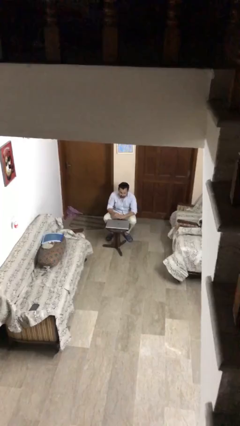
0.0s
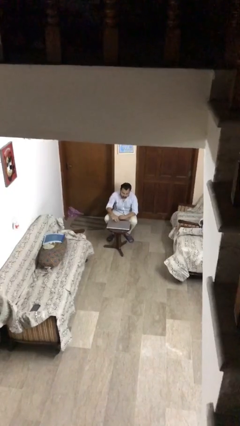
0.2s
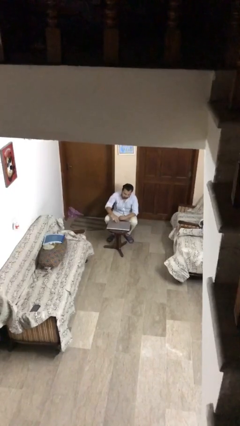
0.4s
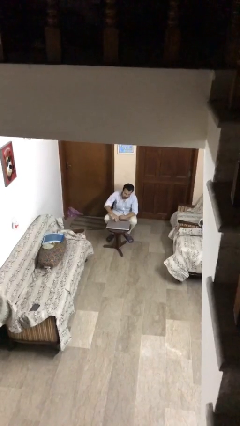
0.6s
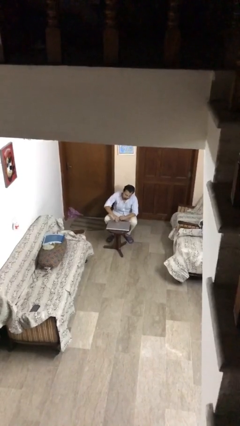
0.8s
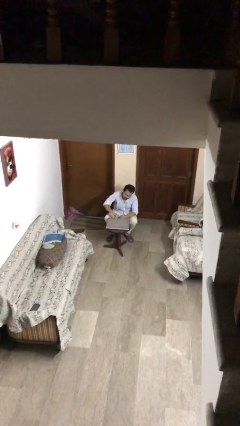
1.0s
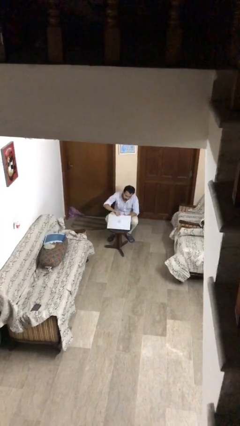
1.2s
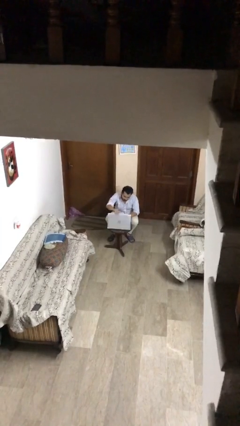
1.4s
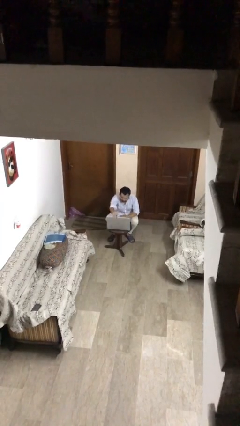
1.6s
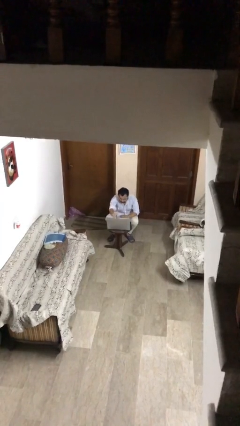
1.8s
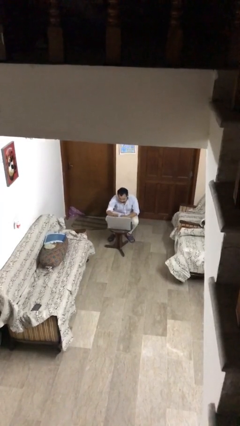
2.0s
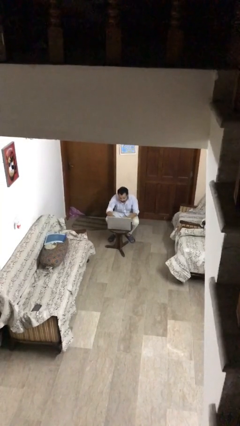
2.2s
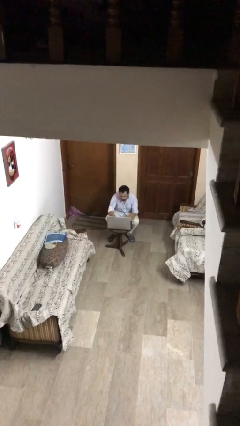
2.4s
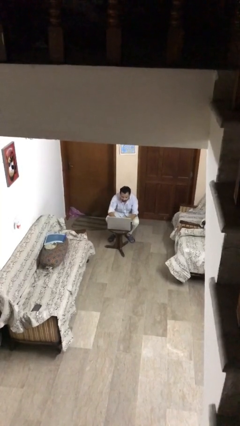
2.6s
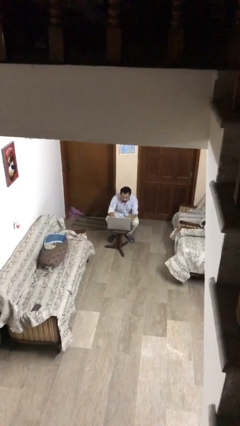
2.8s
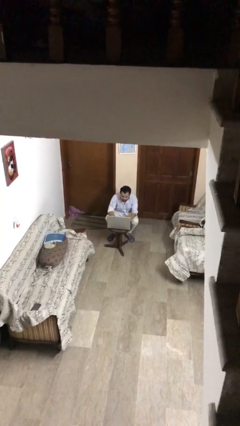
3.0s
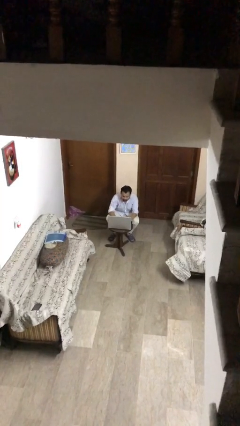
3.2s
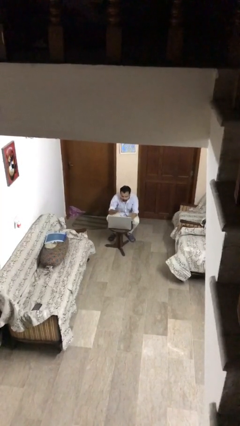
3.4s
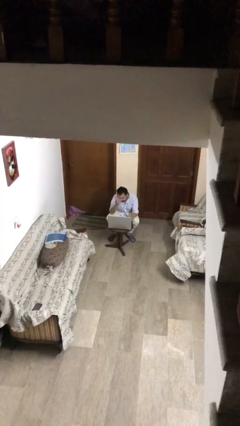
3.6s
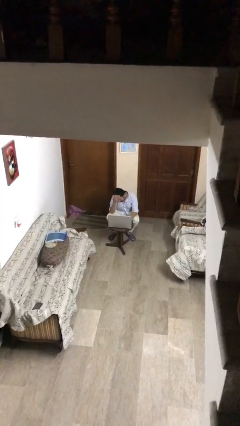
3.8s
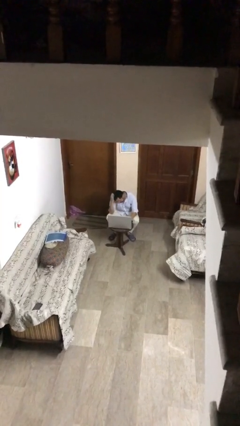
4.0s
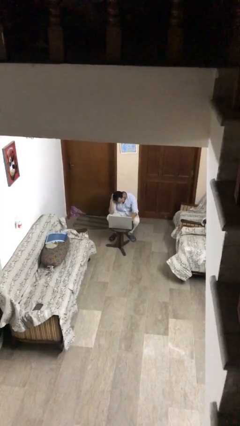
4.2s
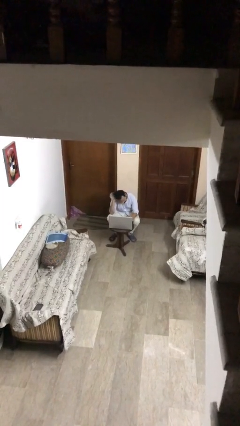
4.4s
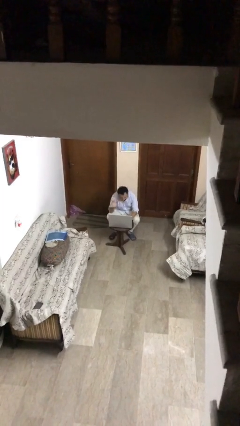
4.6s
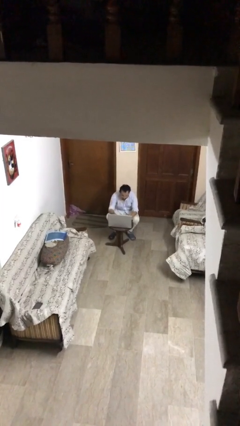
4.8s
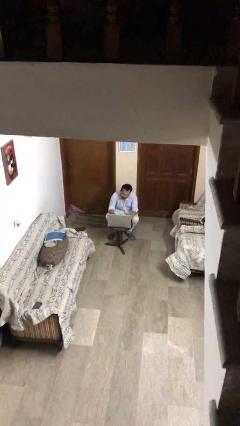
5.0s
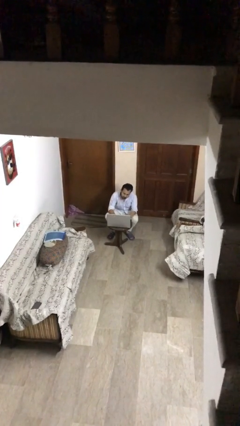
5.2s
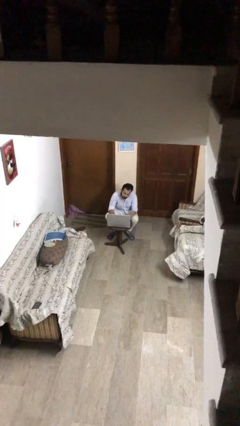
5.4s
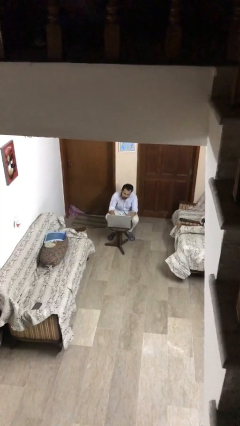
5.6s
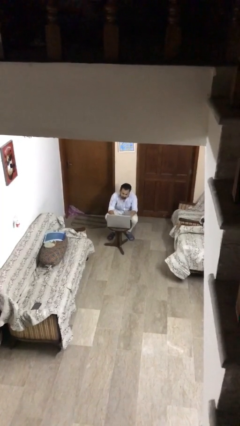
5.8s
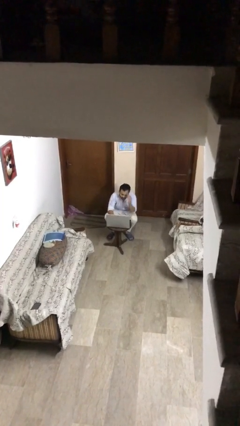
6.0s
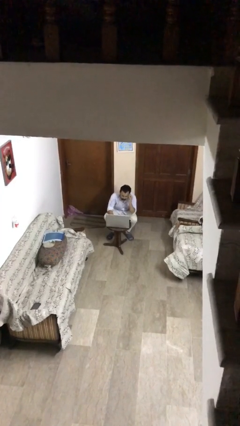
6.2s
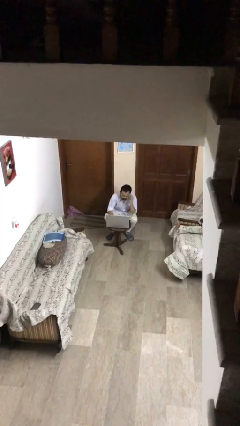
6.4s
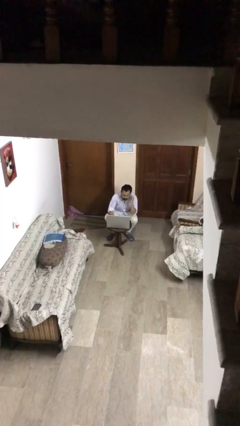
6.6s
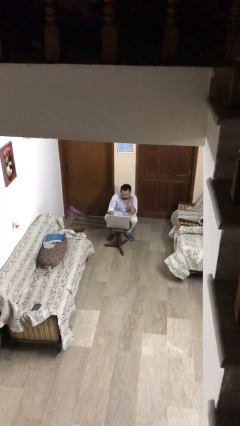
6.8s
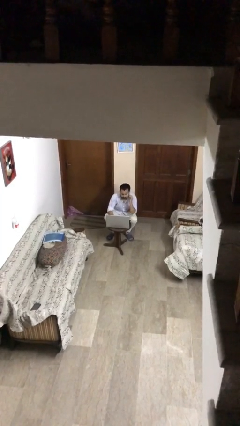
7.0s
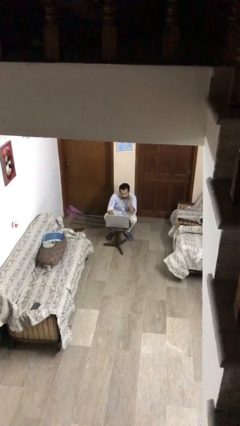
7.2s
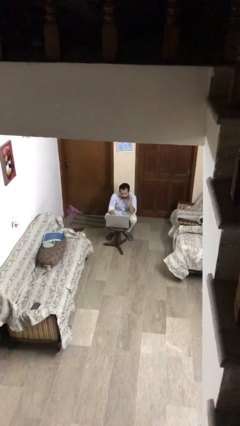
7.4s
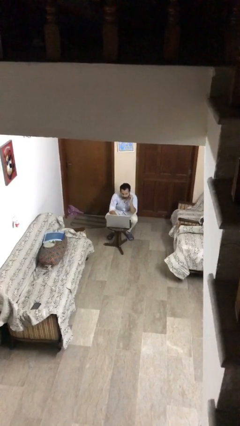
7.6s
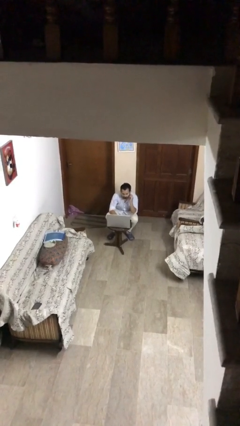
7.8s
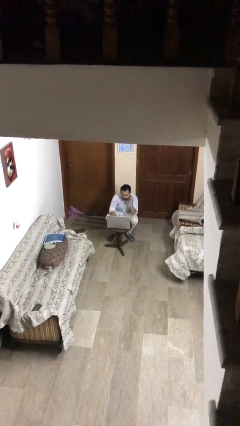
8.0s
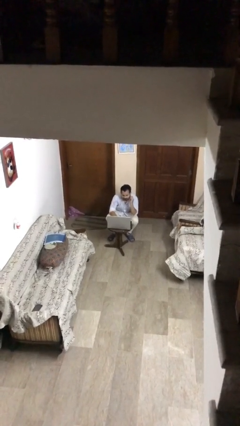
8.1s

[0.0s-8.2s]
person interacts with laptop

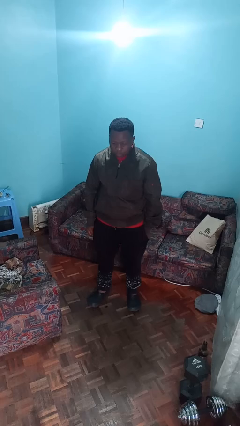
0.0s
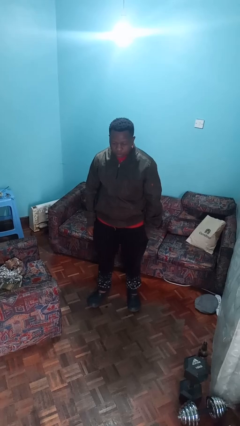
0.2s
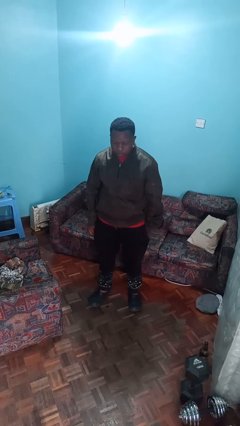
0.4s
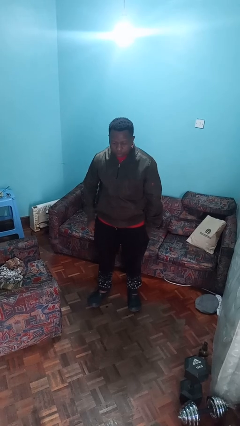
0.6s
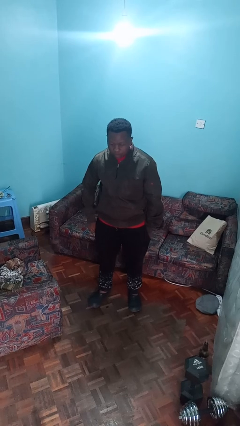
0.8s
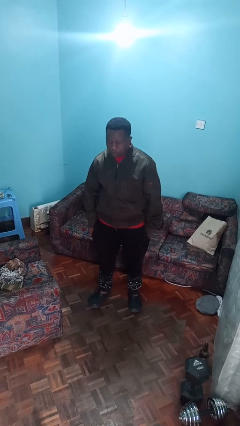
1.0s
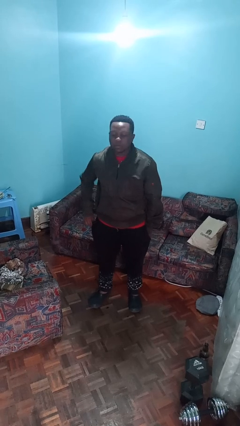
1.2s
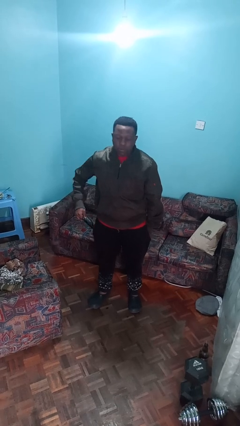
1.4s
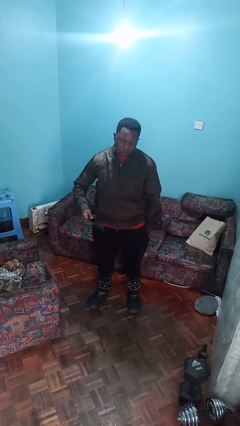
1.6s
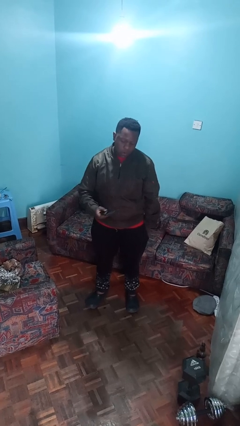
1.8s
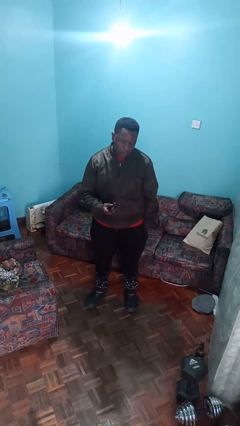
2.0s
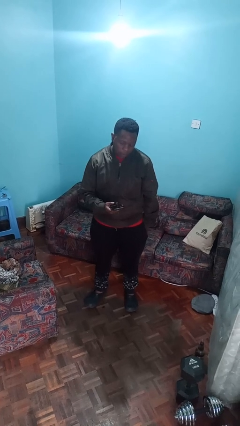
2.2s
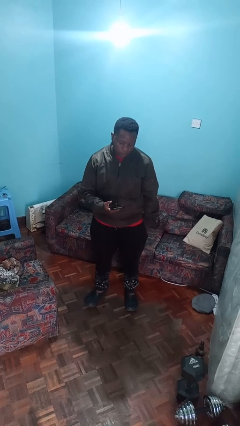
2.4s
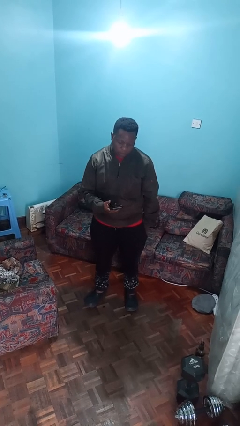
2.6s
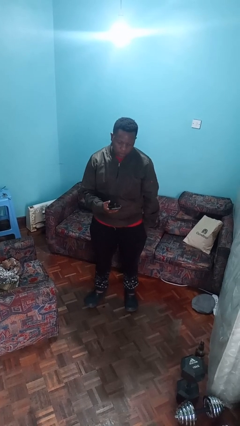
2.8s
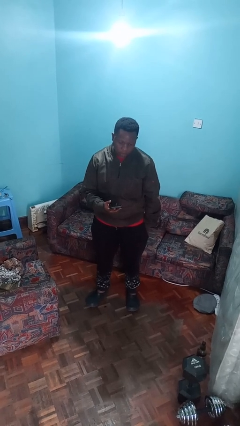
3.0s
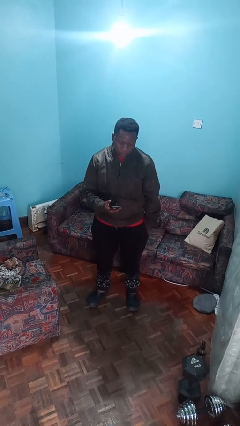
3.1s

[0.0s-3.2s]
person takes phone from pocket

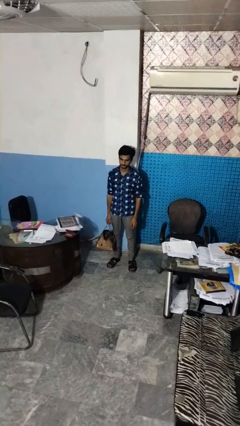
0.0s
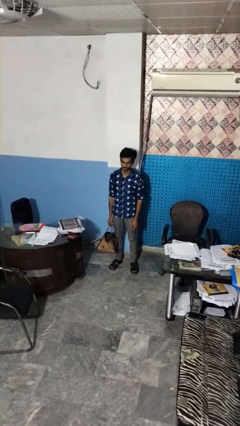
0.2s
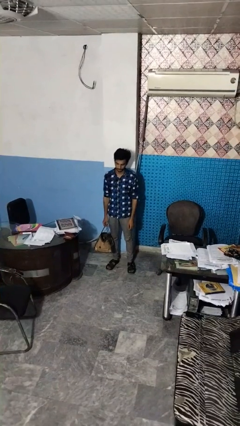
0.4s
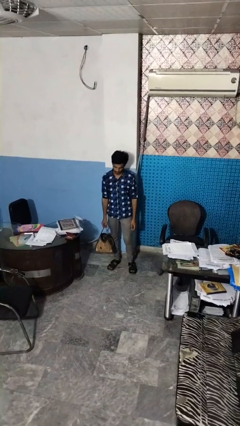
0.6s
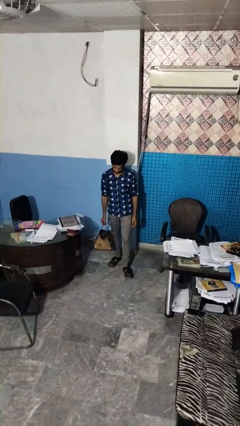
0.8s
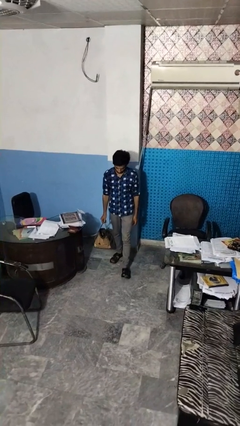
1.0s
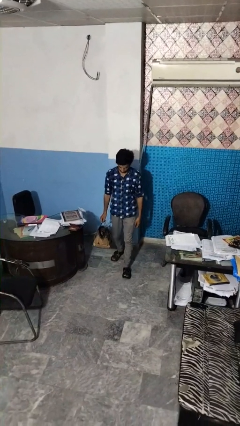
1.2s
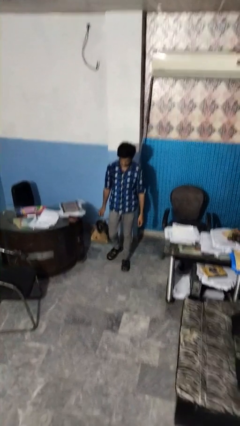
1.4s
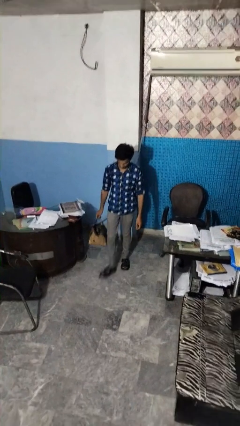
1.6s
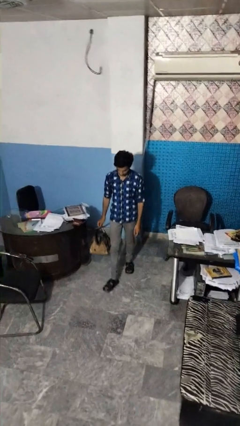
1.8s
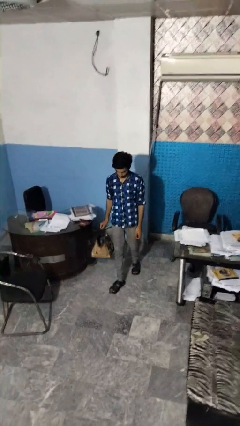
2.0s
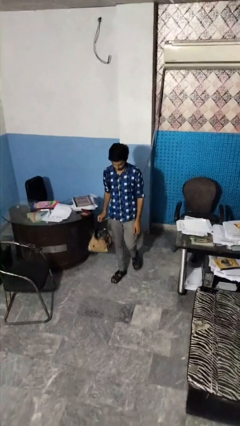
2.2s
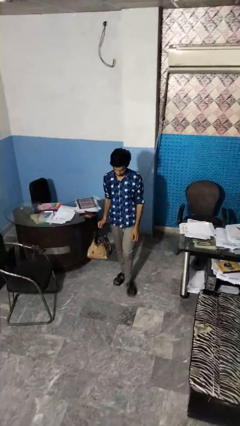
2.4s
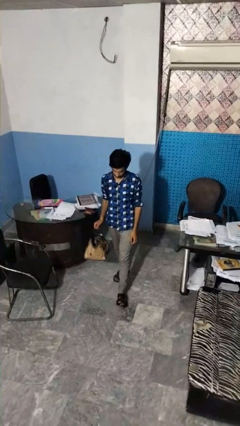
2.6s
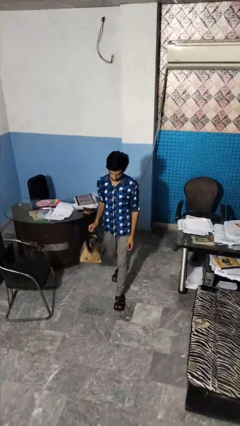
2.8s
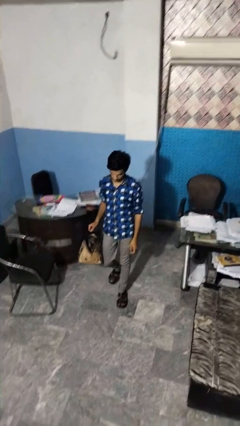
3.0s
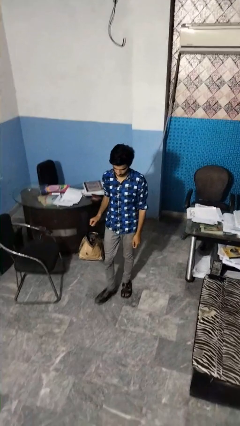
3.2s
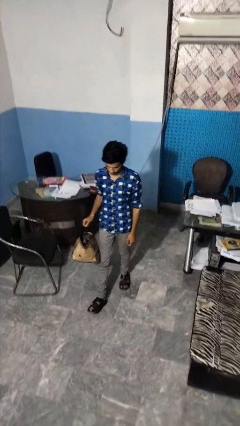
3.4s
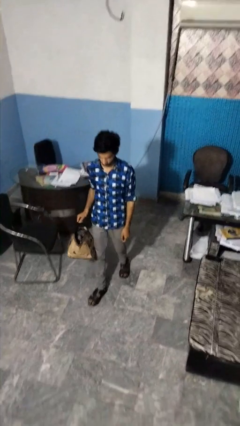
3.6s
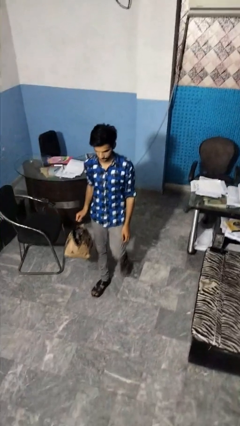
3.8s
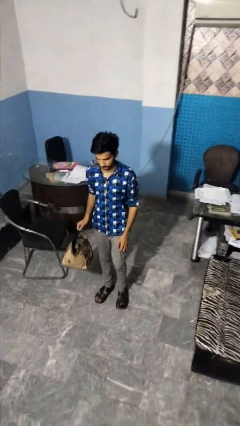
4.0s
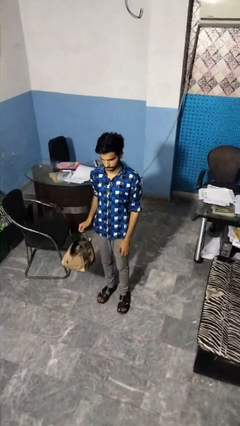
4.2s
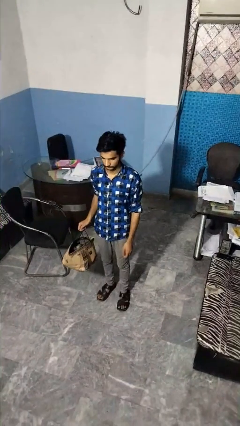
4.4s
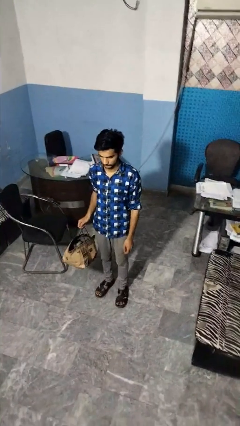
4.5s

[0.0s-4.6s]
person carries groceries

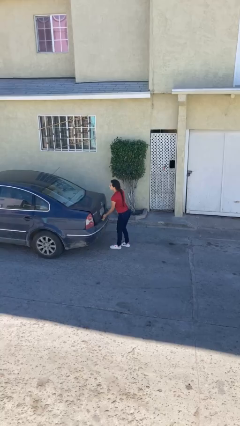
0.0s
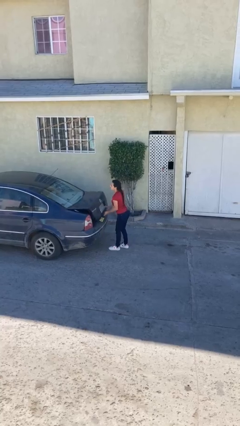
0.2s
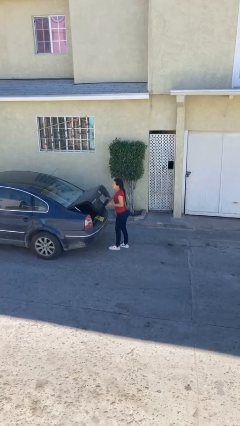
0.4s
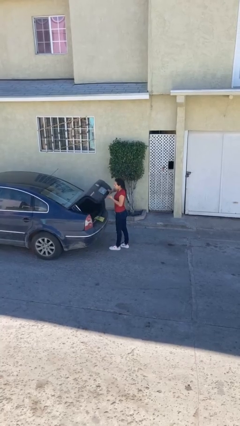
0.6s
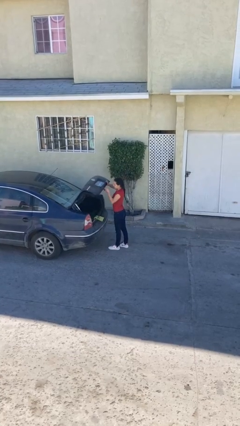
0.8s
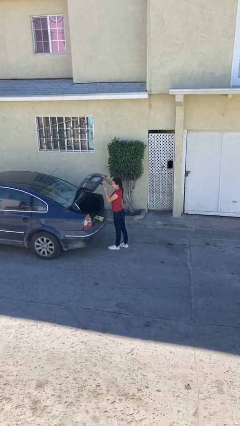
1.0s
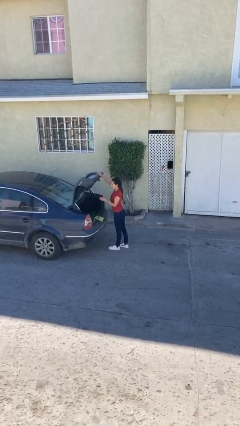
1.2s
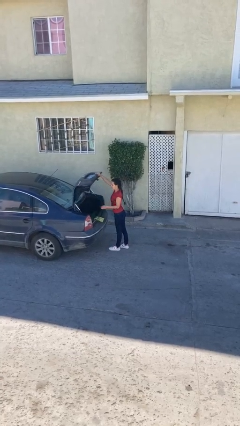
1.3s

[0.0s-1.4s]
person opens car trunk

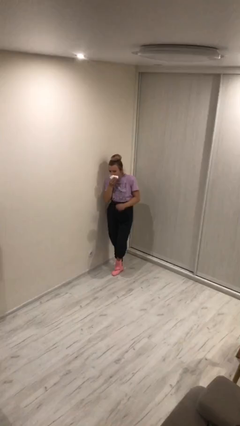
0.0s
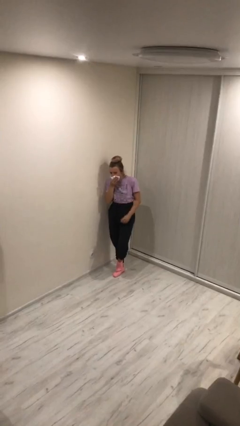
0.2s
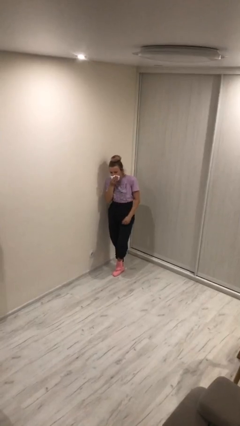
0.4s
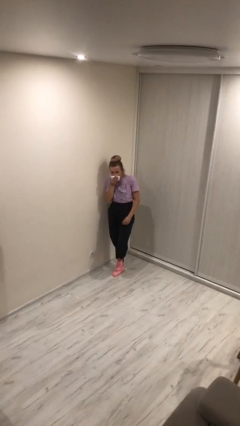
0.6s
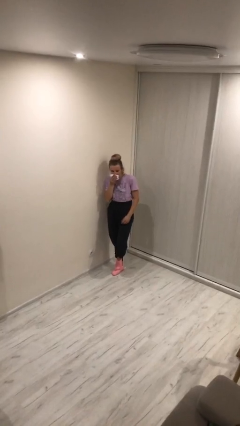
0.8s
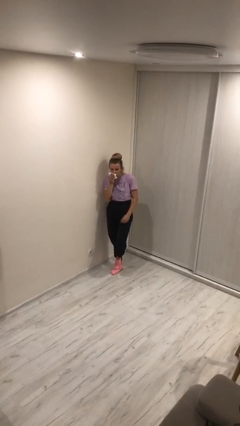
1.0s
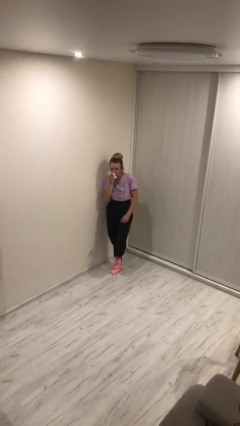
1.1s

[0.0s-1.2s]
person wipes mouth with napkin
